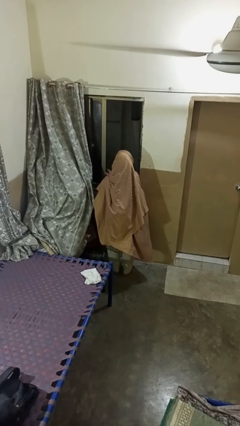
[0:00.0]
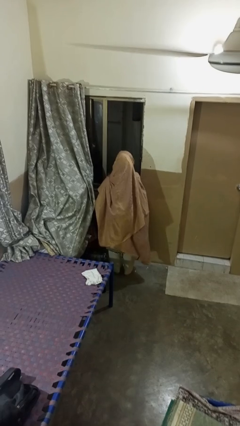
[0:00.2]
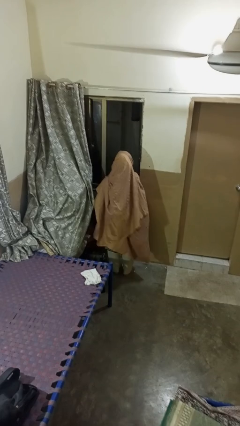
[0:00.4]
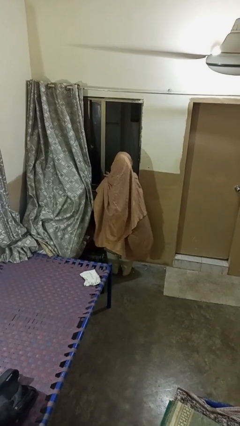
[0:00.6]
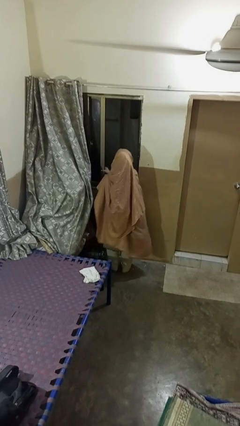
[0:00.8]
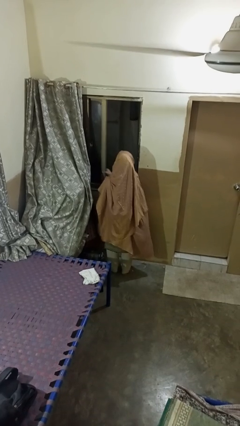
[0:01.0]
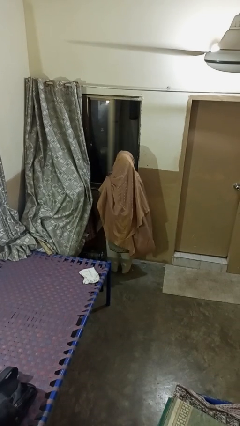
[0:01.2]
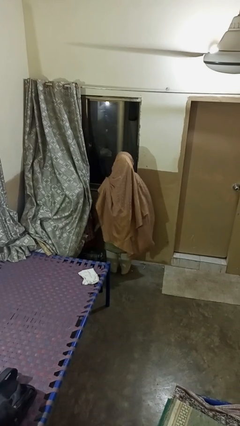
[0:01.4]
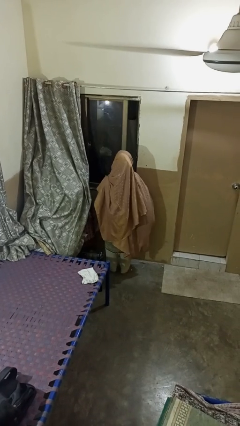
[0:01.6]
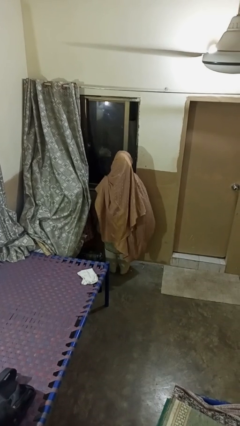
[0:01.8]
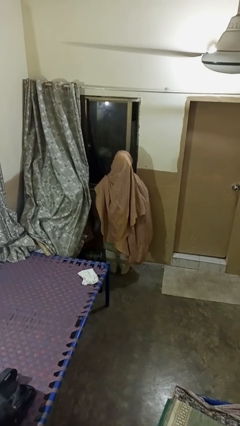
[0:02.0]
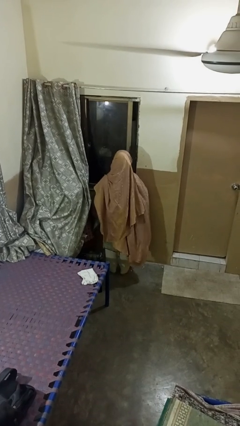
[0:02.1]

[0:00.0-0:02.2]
person closes home window

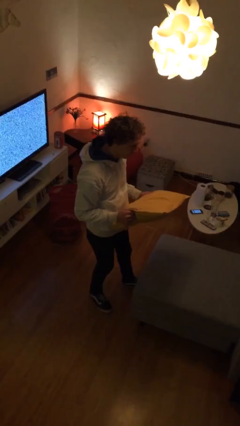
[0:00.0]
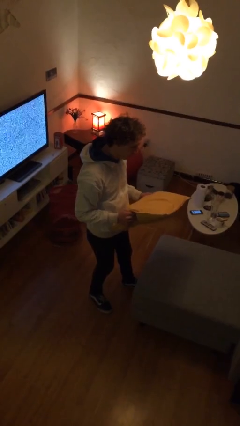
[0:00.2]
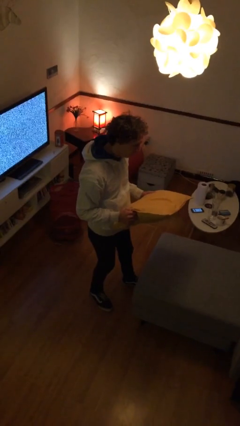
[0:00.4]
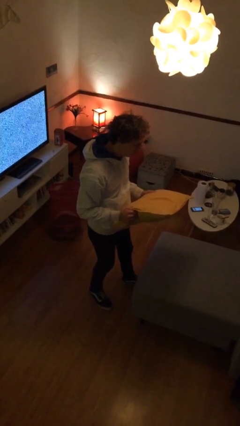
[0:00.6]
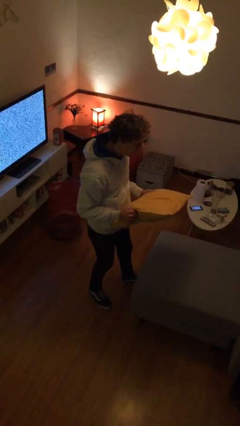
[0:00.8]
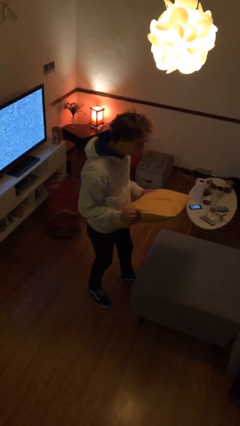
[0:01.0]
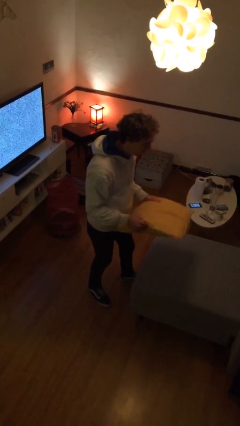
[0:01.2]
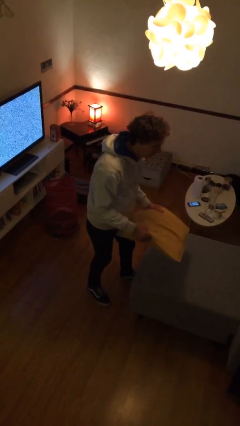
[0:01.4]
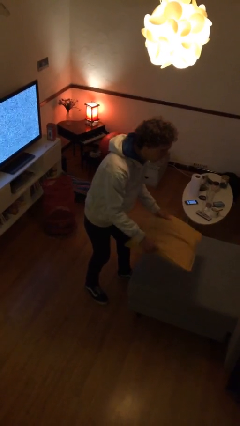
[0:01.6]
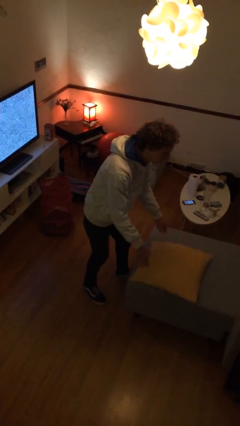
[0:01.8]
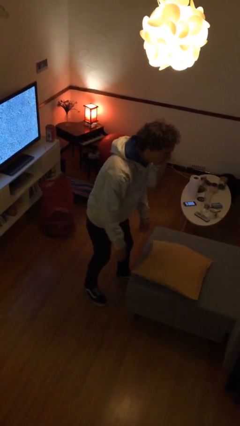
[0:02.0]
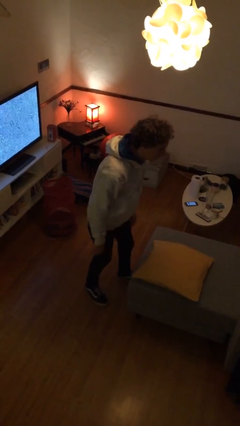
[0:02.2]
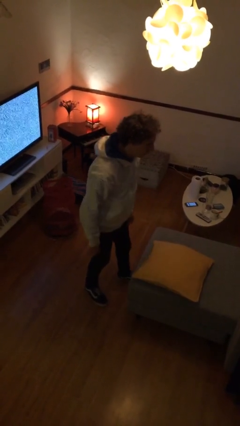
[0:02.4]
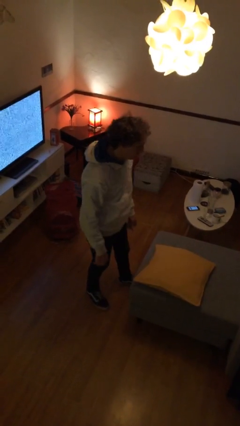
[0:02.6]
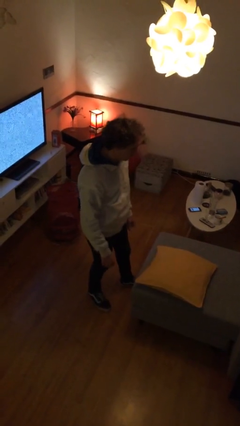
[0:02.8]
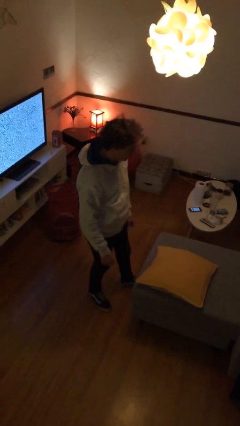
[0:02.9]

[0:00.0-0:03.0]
person puts down object on couch

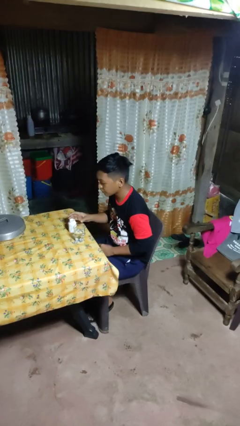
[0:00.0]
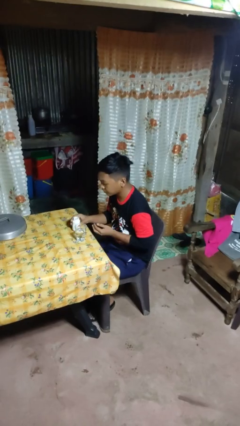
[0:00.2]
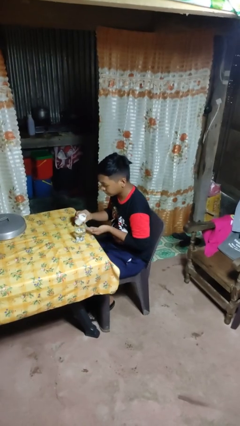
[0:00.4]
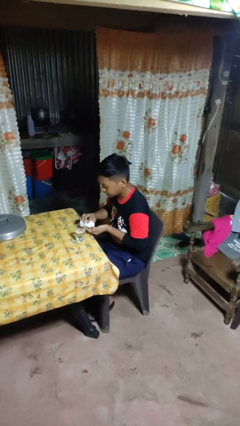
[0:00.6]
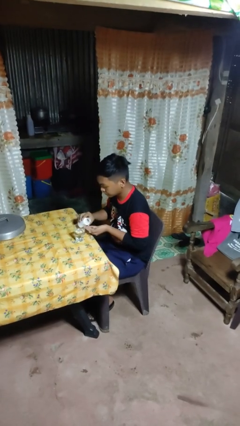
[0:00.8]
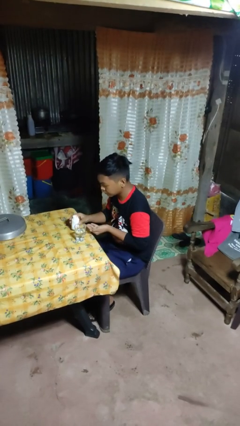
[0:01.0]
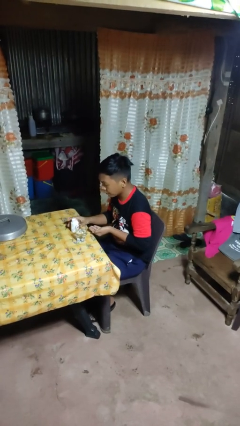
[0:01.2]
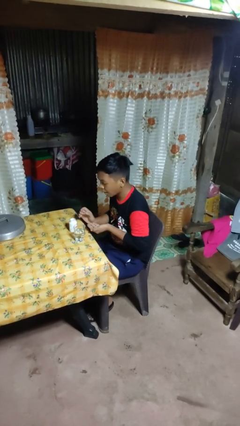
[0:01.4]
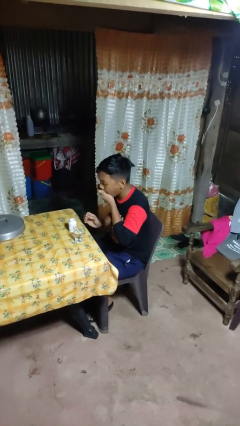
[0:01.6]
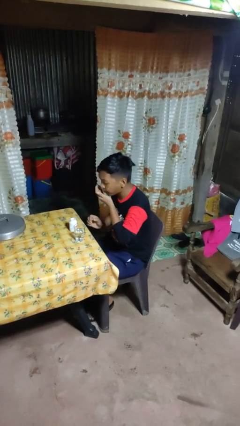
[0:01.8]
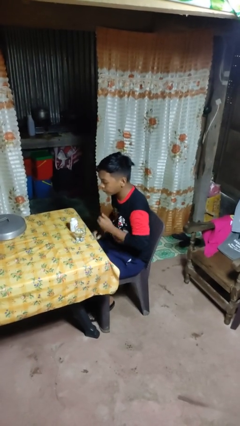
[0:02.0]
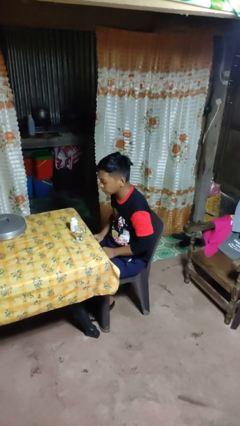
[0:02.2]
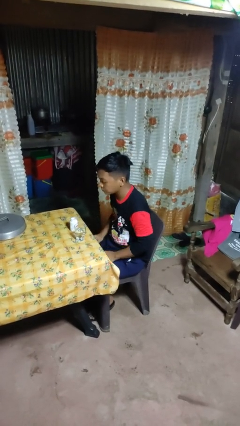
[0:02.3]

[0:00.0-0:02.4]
person takes medicine pills

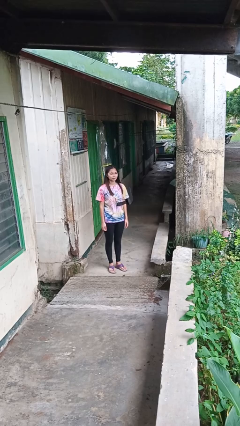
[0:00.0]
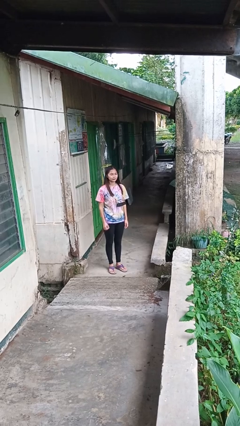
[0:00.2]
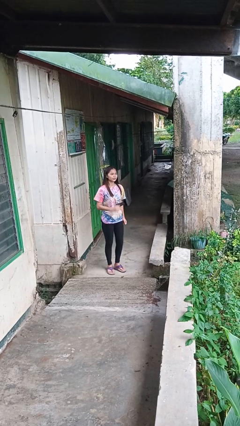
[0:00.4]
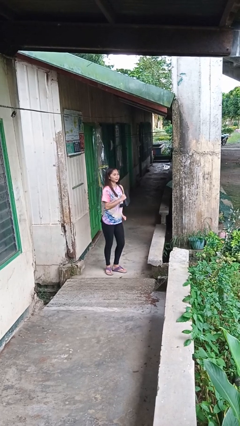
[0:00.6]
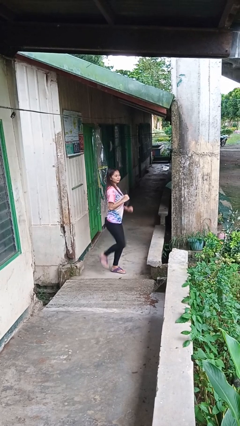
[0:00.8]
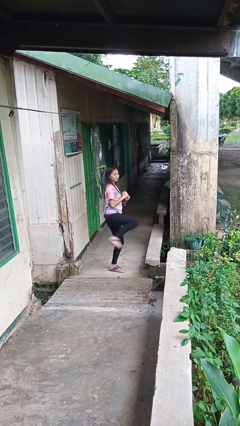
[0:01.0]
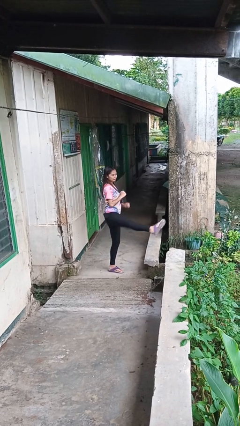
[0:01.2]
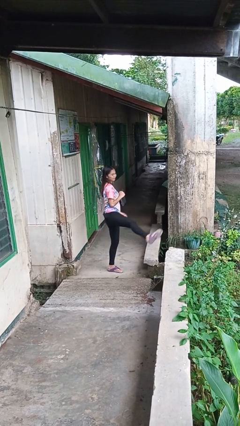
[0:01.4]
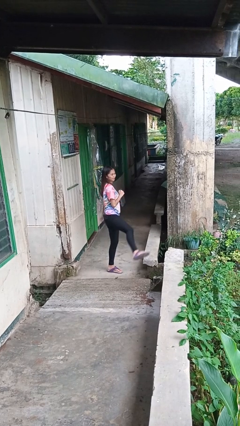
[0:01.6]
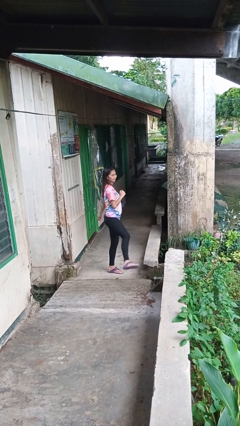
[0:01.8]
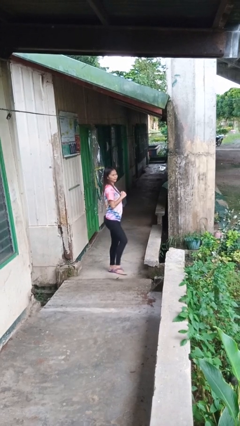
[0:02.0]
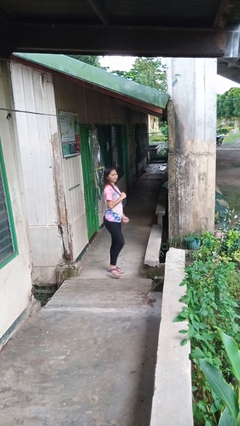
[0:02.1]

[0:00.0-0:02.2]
person karate kicks

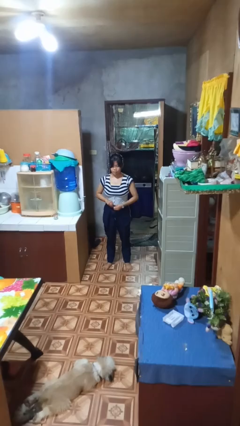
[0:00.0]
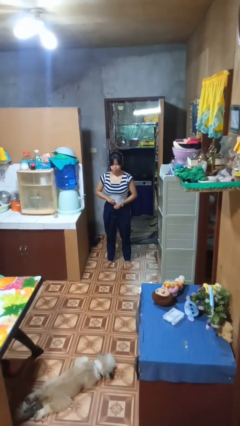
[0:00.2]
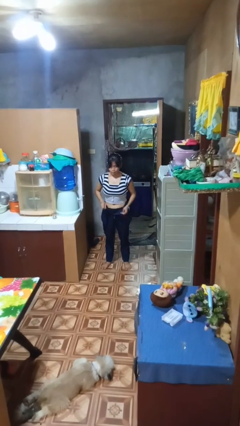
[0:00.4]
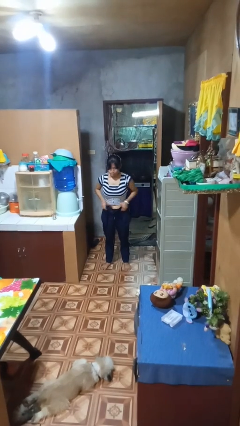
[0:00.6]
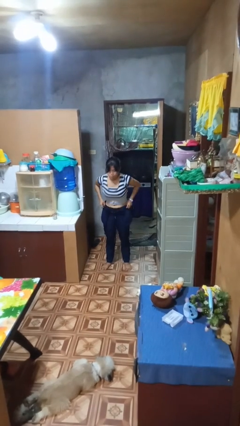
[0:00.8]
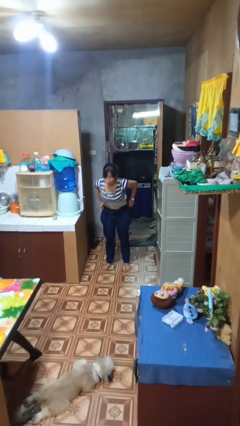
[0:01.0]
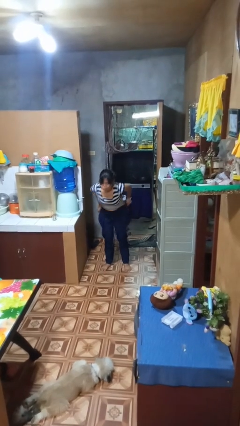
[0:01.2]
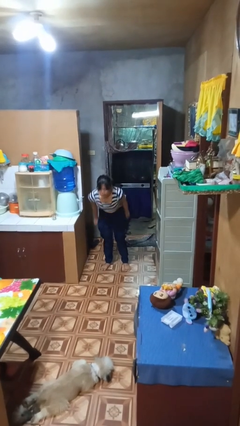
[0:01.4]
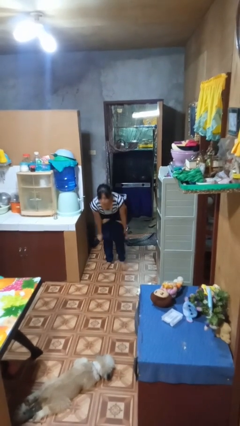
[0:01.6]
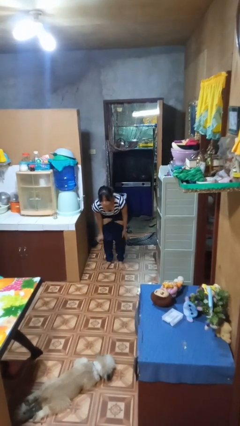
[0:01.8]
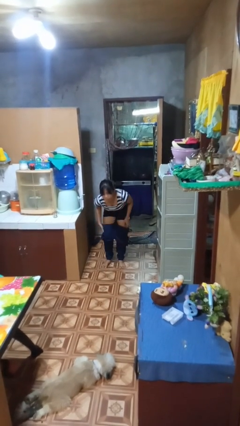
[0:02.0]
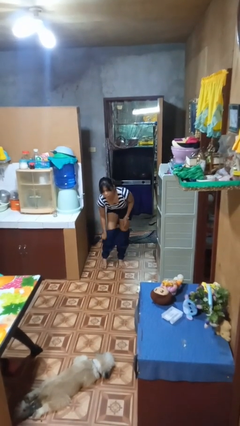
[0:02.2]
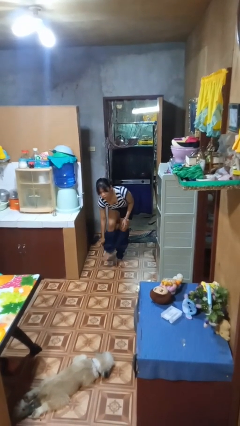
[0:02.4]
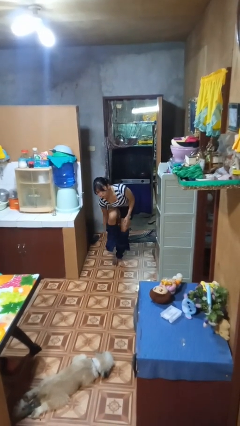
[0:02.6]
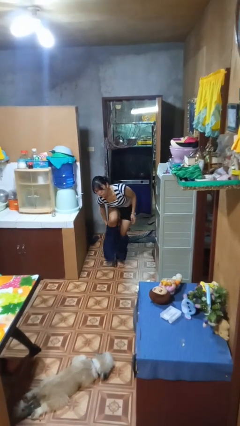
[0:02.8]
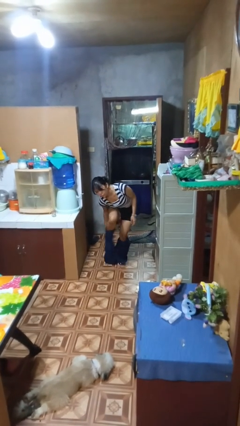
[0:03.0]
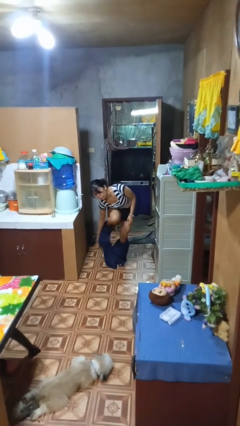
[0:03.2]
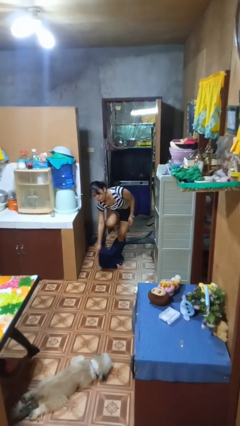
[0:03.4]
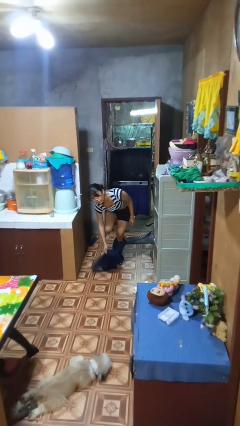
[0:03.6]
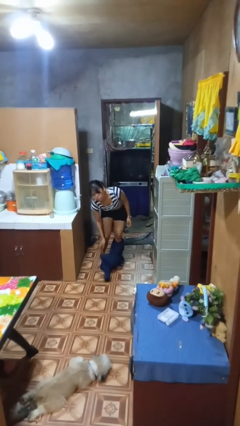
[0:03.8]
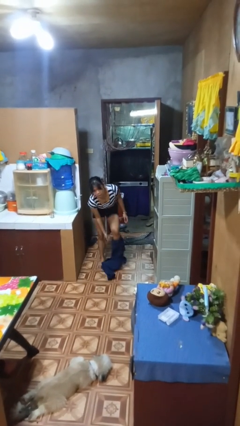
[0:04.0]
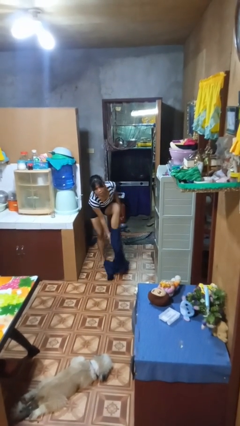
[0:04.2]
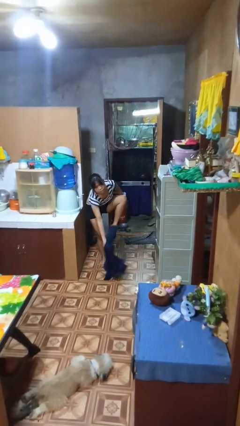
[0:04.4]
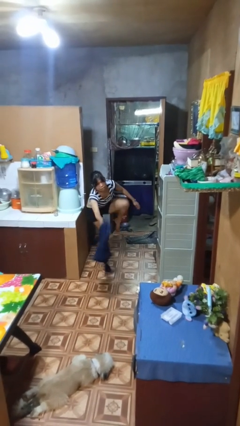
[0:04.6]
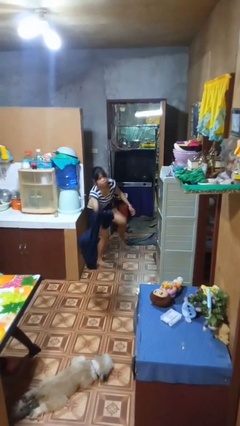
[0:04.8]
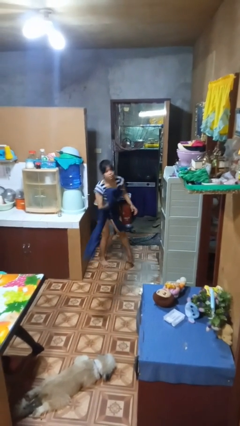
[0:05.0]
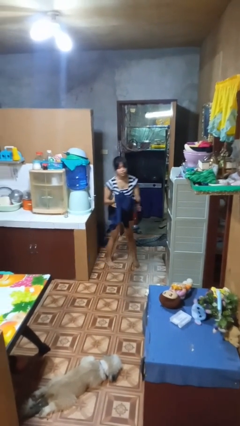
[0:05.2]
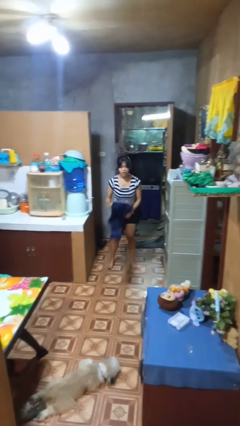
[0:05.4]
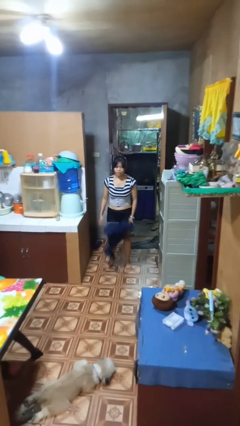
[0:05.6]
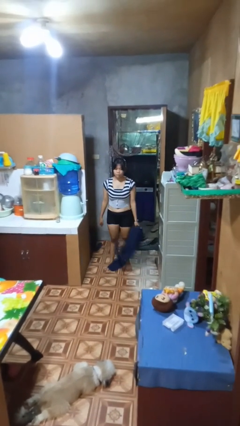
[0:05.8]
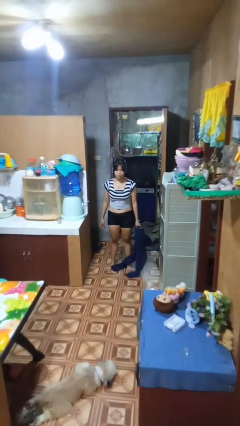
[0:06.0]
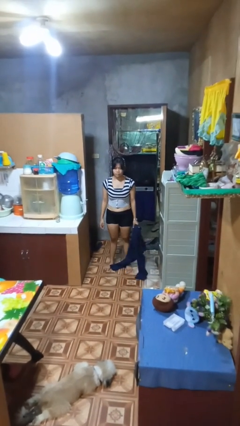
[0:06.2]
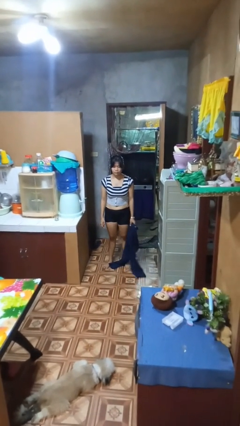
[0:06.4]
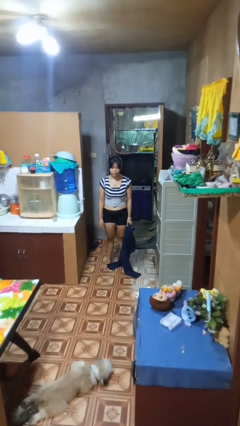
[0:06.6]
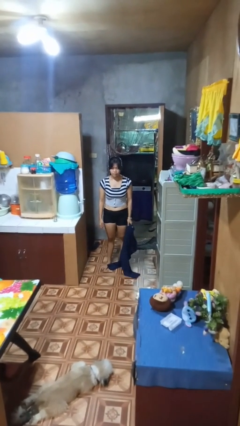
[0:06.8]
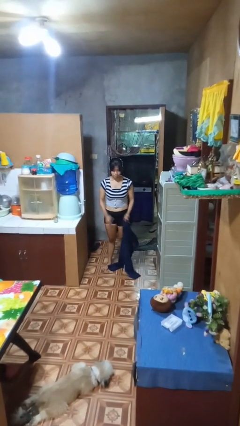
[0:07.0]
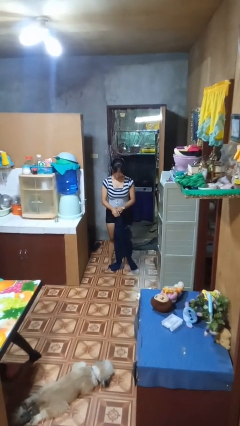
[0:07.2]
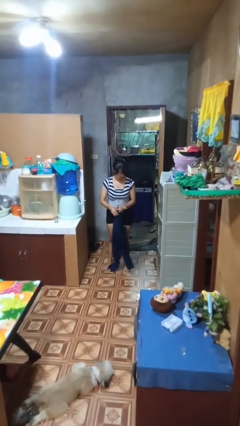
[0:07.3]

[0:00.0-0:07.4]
person takes off pants

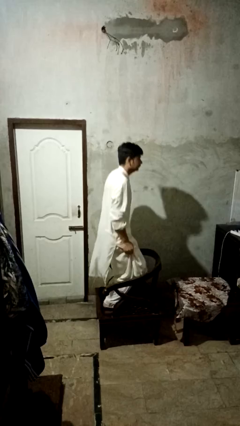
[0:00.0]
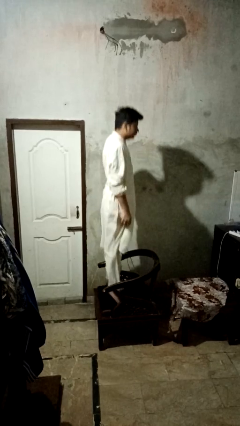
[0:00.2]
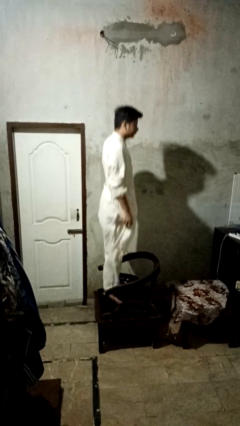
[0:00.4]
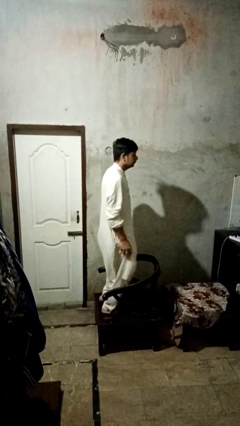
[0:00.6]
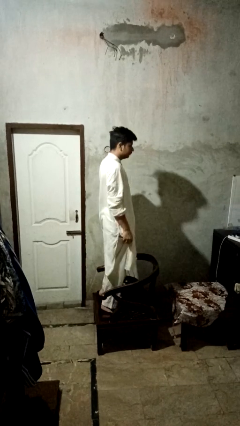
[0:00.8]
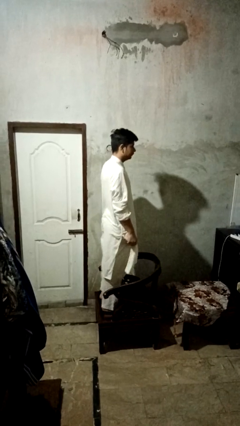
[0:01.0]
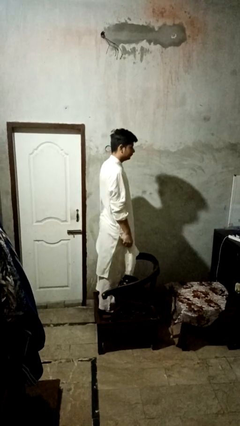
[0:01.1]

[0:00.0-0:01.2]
person jumps on couch
